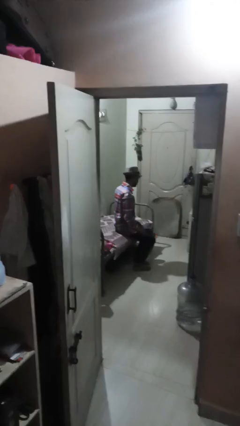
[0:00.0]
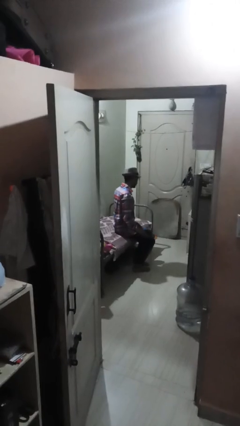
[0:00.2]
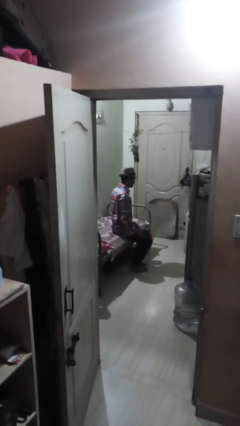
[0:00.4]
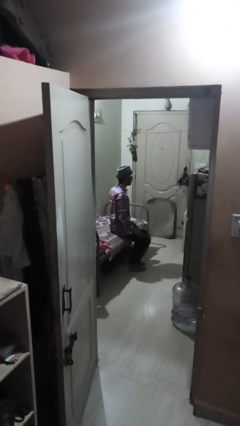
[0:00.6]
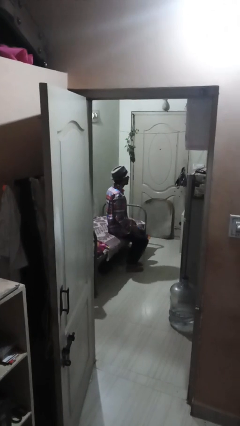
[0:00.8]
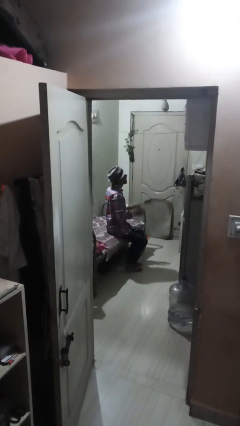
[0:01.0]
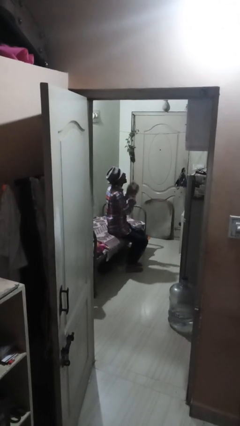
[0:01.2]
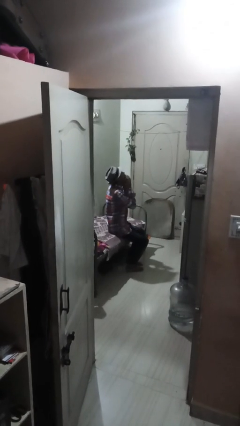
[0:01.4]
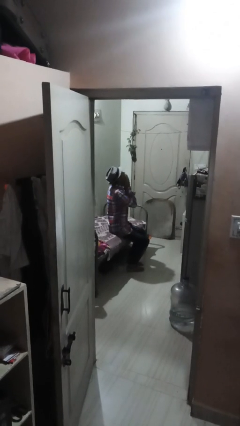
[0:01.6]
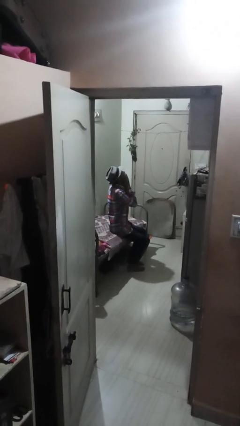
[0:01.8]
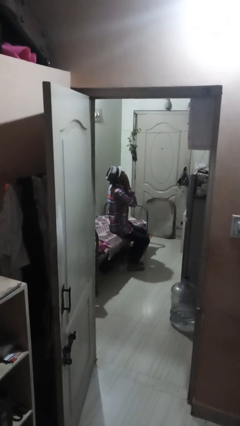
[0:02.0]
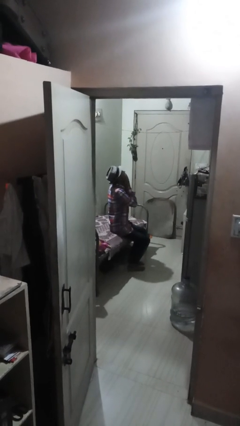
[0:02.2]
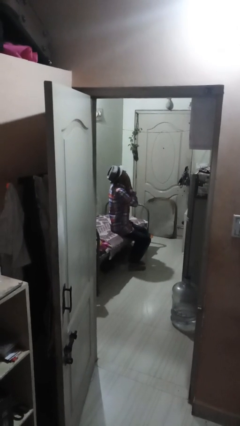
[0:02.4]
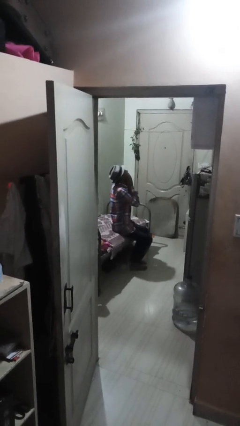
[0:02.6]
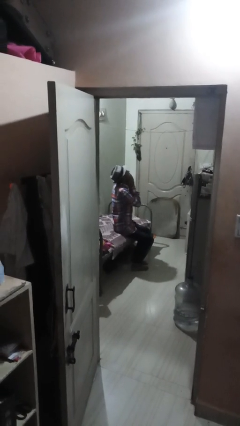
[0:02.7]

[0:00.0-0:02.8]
person yawns

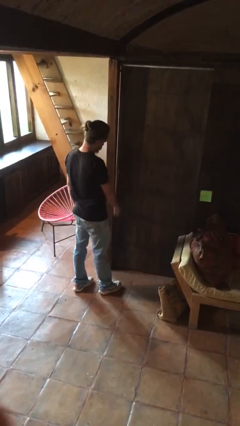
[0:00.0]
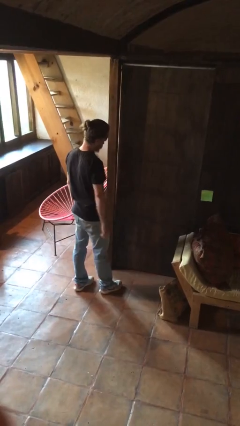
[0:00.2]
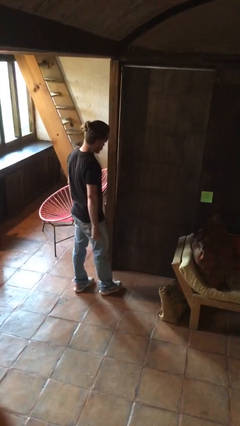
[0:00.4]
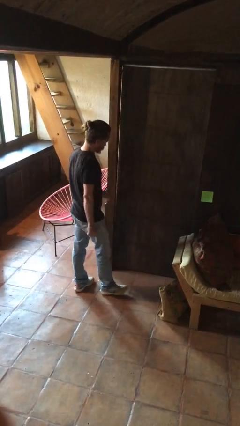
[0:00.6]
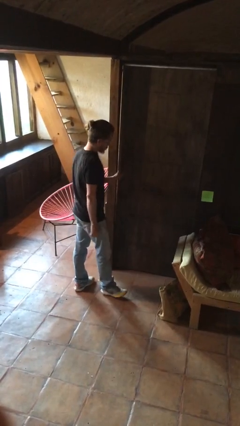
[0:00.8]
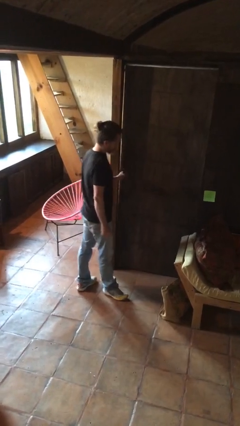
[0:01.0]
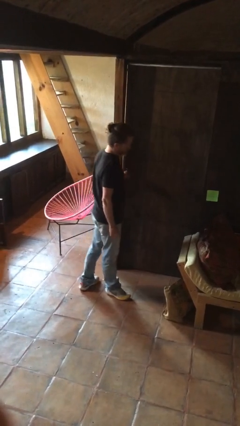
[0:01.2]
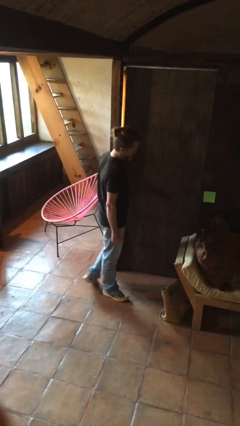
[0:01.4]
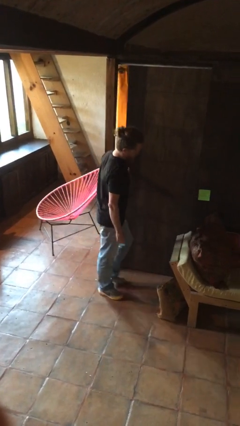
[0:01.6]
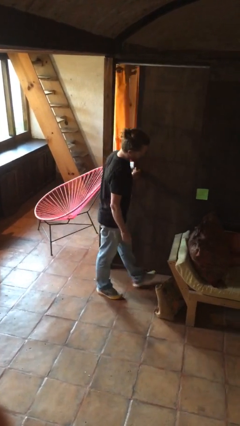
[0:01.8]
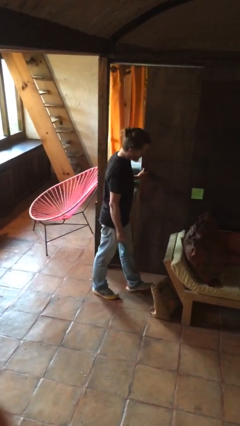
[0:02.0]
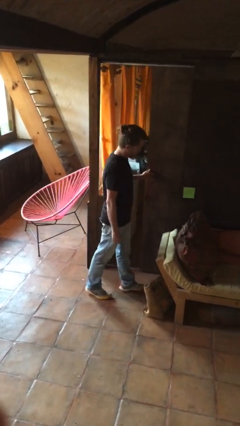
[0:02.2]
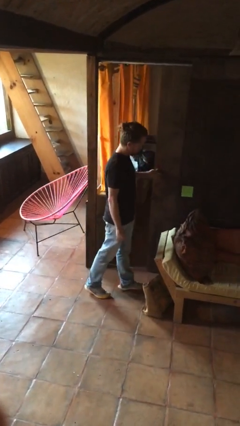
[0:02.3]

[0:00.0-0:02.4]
person opens facility door

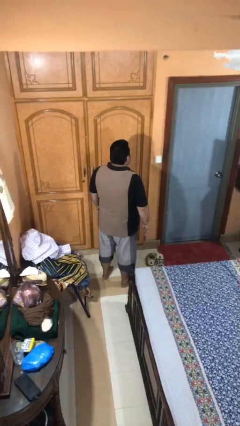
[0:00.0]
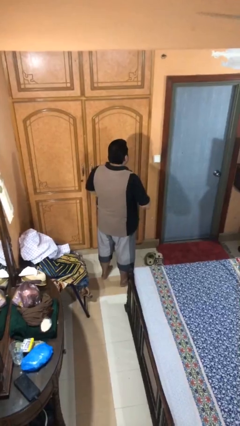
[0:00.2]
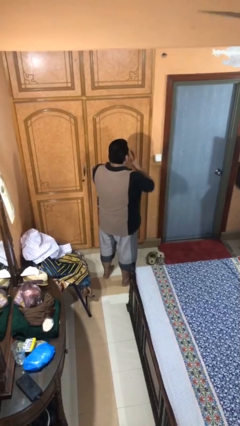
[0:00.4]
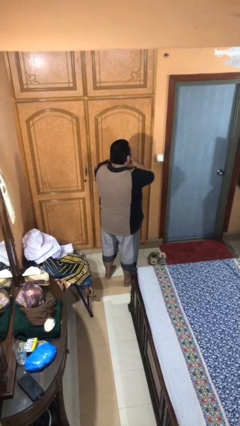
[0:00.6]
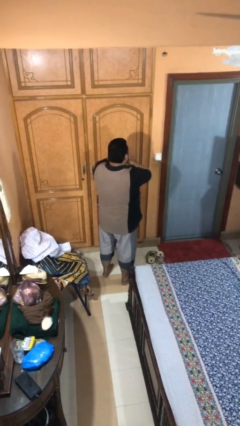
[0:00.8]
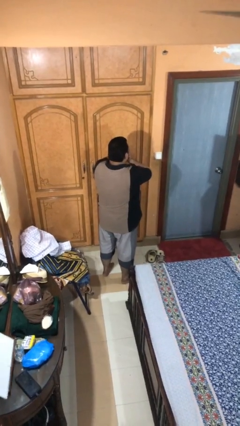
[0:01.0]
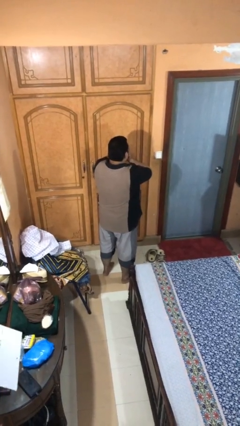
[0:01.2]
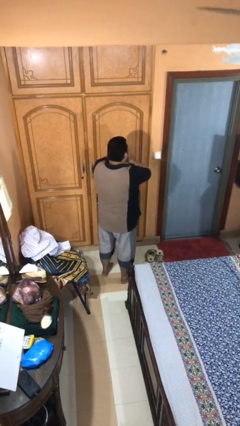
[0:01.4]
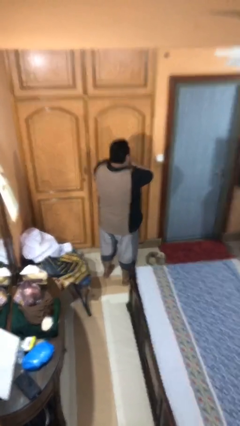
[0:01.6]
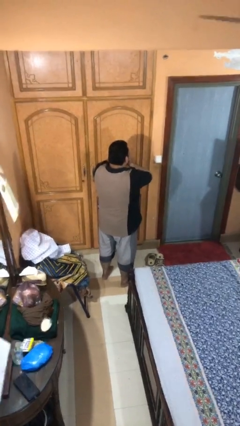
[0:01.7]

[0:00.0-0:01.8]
person covers face with hands

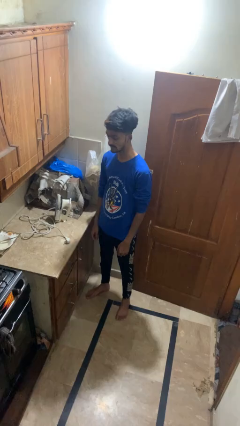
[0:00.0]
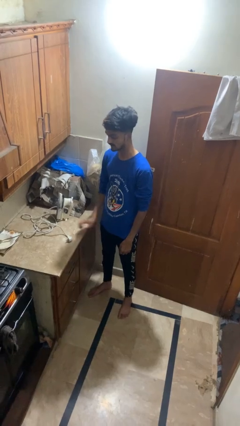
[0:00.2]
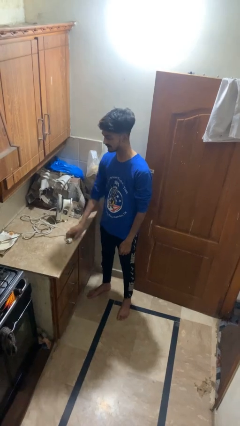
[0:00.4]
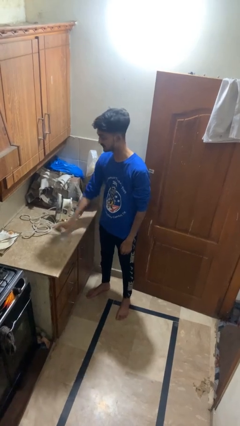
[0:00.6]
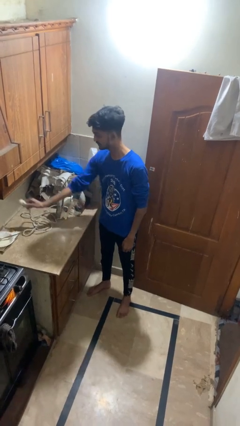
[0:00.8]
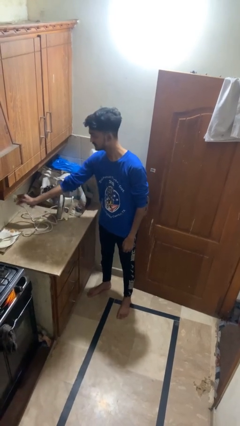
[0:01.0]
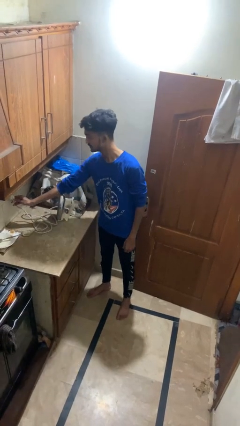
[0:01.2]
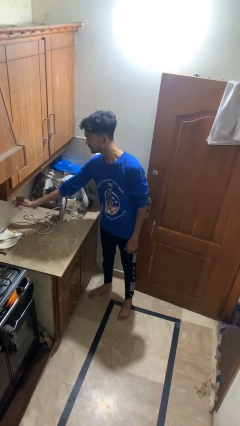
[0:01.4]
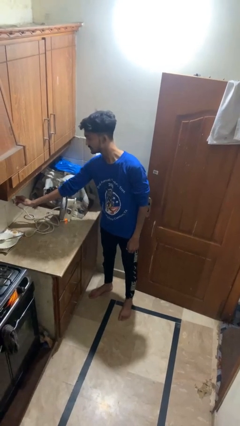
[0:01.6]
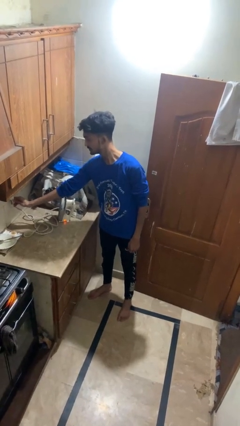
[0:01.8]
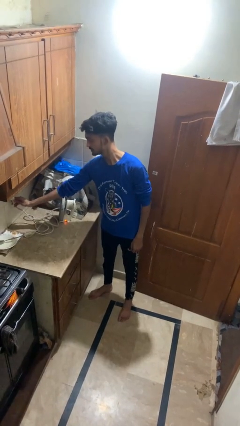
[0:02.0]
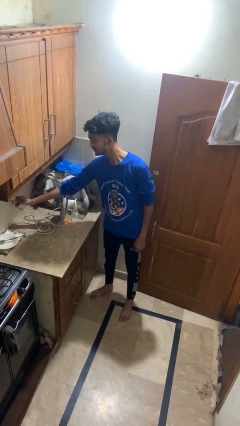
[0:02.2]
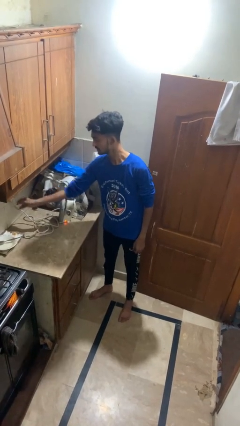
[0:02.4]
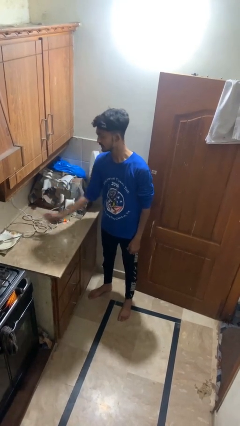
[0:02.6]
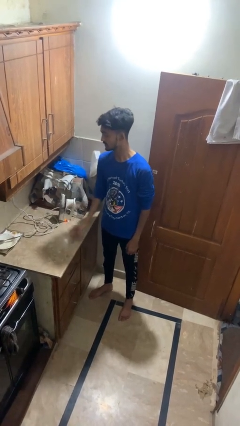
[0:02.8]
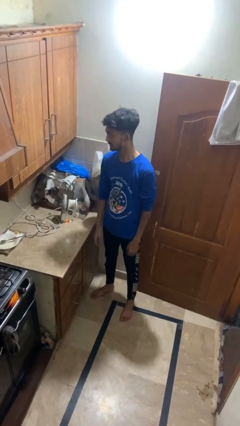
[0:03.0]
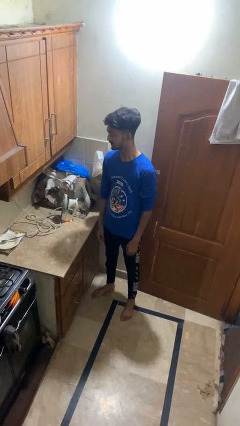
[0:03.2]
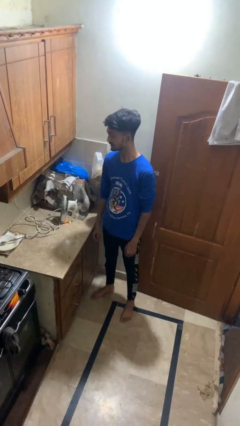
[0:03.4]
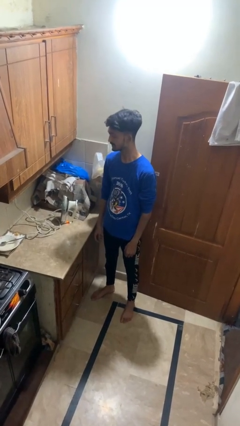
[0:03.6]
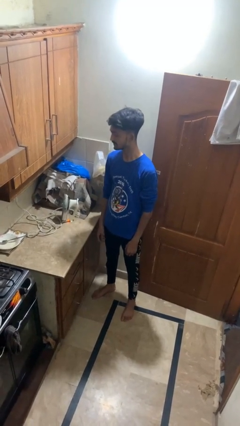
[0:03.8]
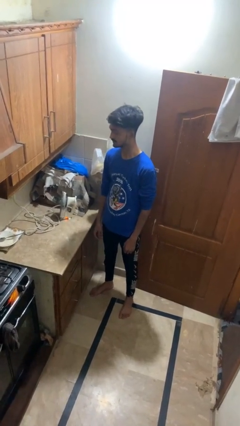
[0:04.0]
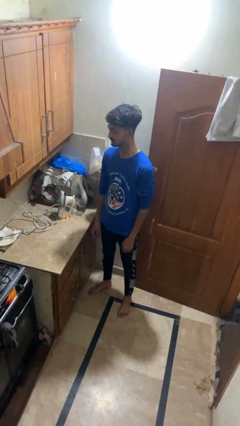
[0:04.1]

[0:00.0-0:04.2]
person plugs into electrical socket

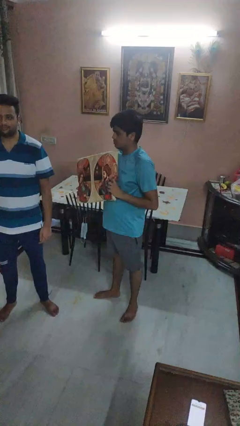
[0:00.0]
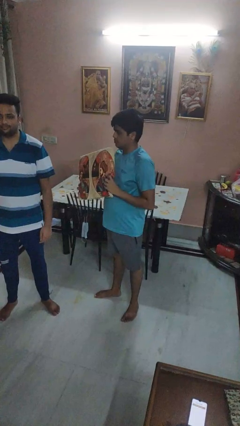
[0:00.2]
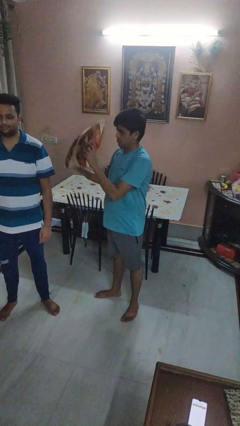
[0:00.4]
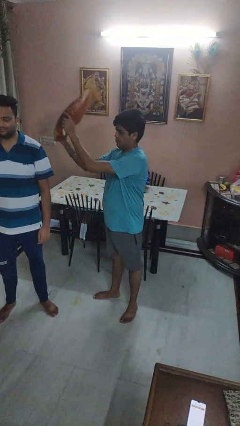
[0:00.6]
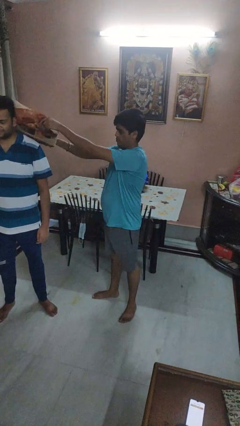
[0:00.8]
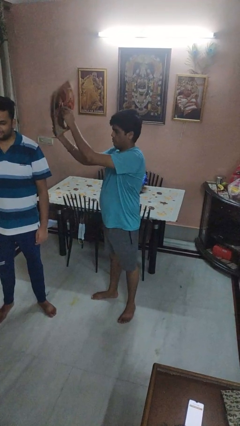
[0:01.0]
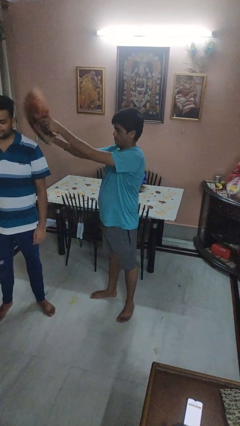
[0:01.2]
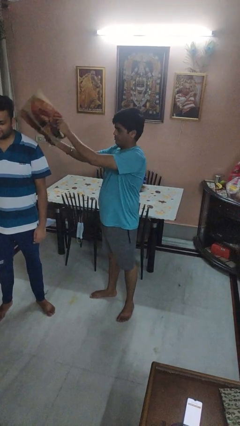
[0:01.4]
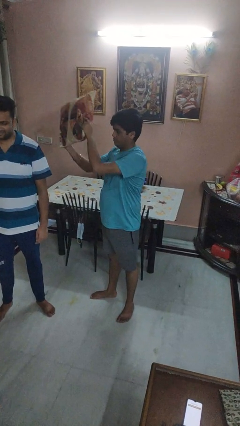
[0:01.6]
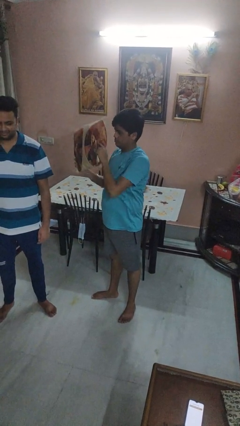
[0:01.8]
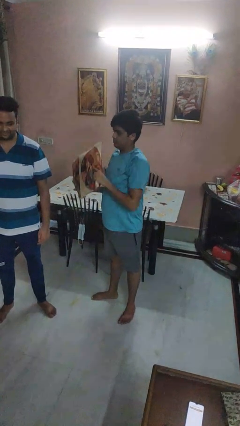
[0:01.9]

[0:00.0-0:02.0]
person hits person with pillow

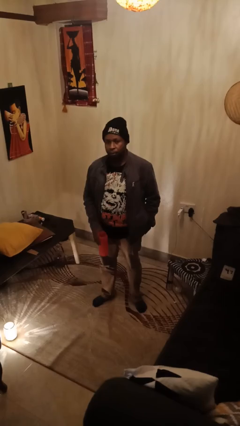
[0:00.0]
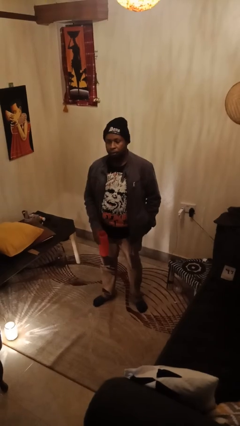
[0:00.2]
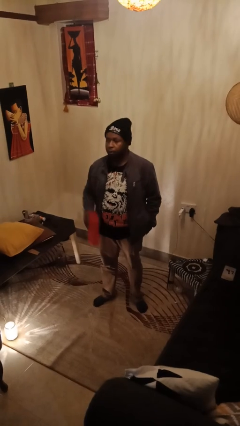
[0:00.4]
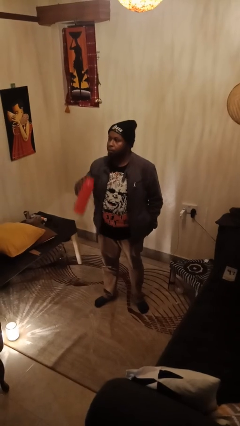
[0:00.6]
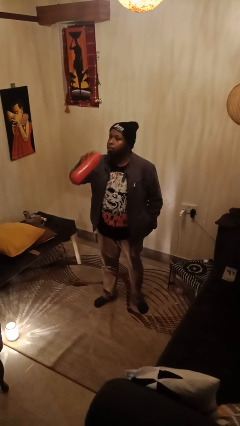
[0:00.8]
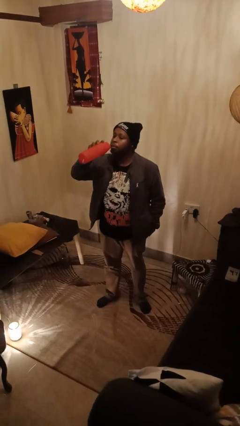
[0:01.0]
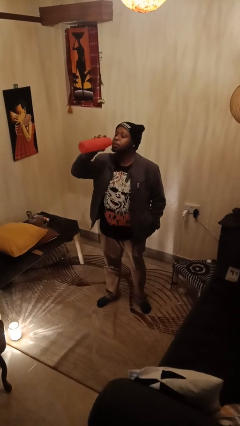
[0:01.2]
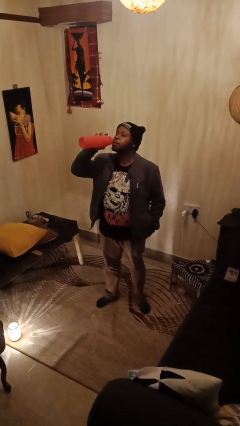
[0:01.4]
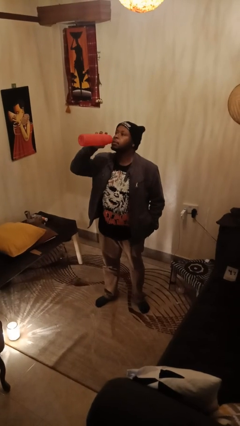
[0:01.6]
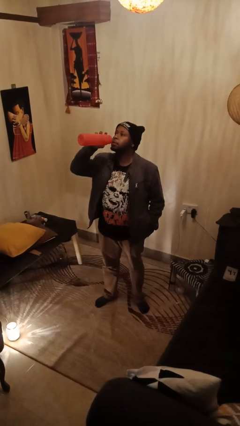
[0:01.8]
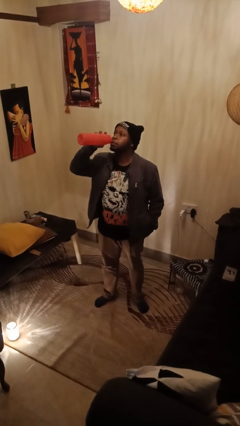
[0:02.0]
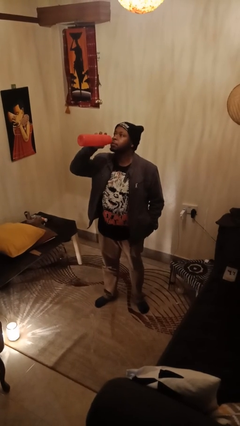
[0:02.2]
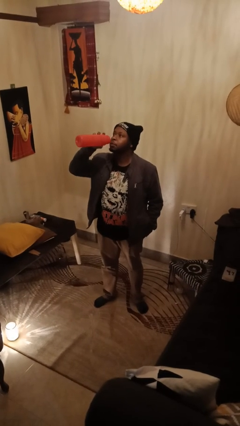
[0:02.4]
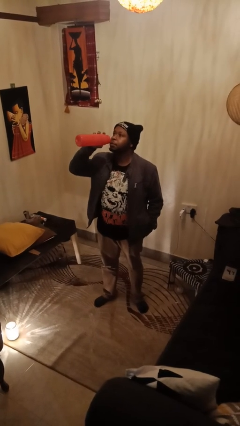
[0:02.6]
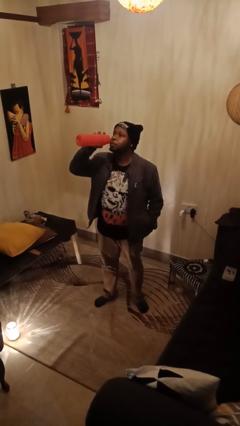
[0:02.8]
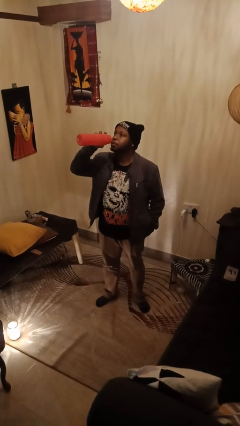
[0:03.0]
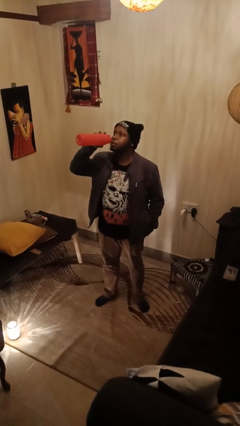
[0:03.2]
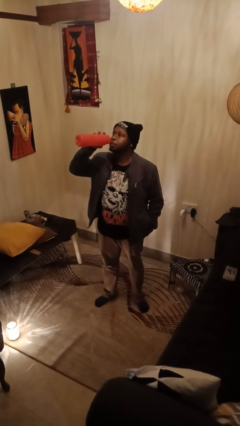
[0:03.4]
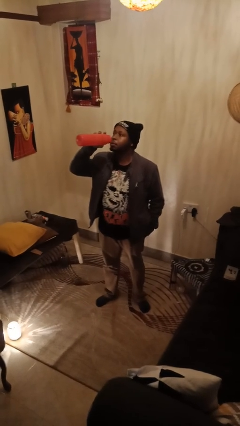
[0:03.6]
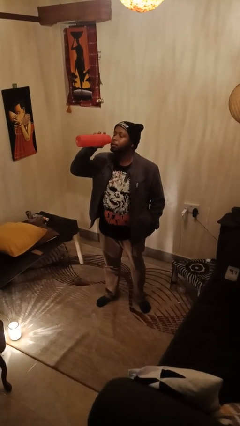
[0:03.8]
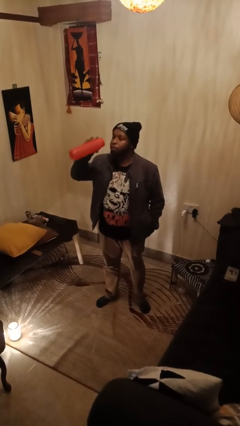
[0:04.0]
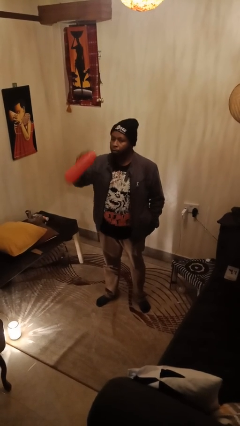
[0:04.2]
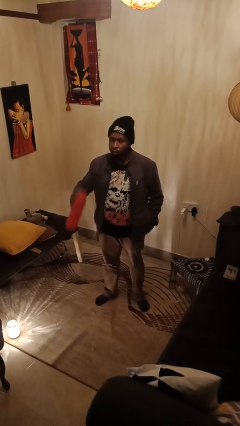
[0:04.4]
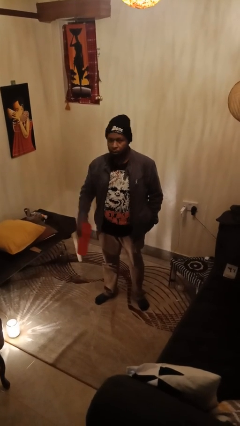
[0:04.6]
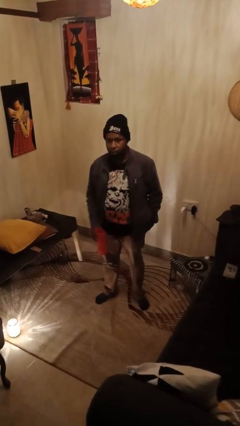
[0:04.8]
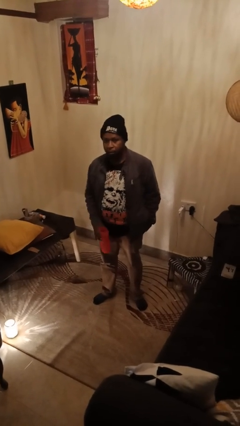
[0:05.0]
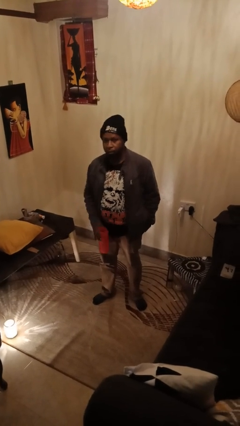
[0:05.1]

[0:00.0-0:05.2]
person drinks from bottle
